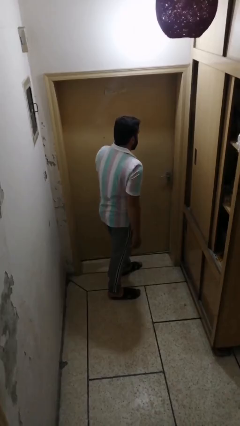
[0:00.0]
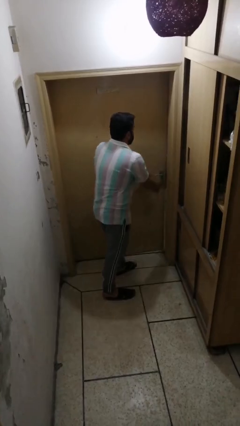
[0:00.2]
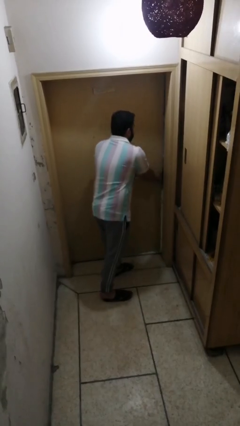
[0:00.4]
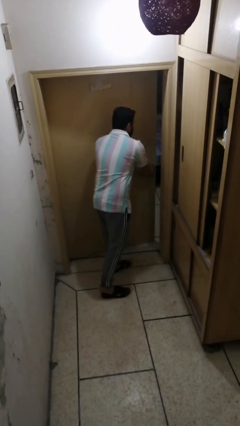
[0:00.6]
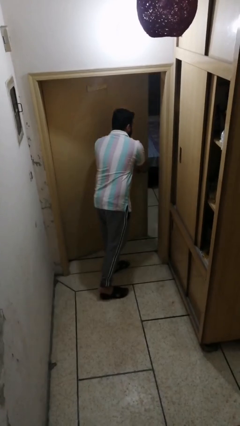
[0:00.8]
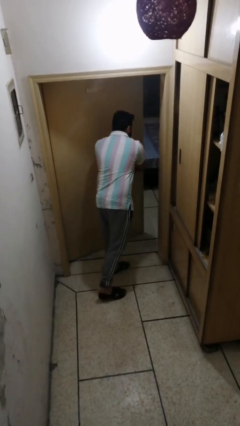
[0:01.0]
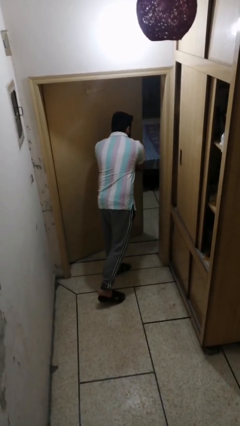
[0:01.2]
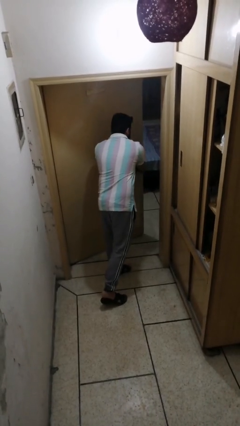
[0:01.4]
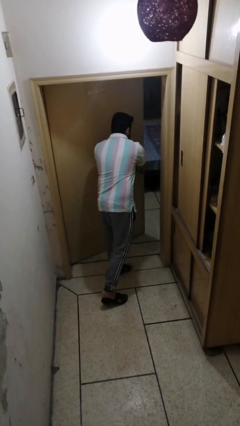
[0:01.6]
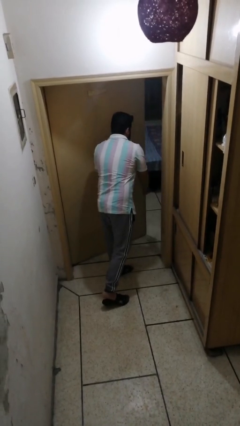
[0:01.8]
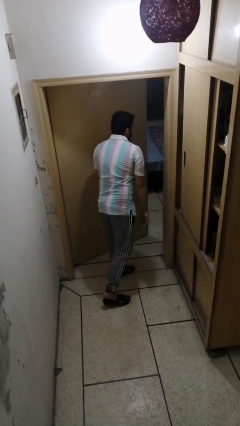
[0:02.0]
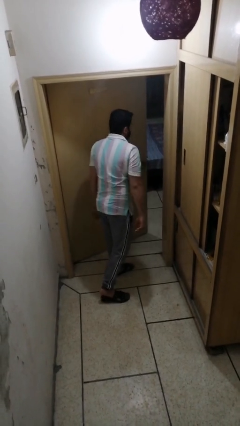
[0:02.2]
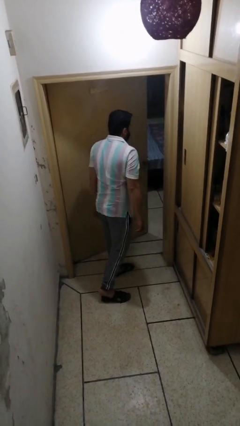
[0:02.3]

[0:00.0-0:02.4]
person opens facility door

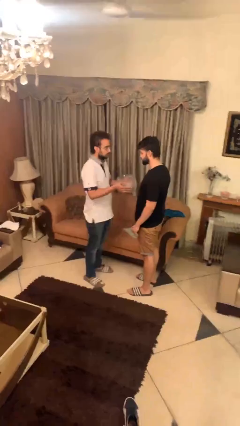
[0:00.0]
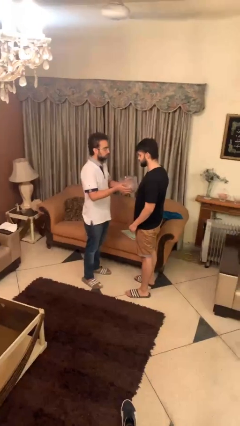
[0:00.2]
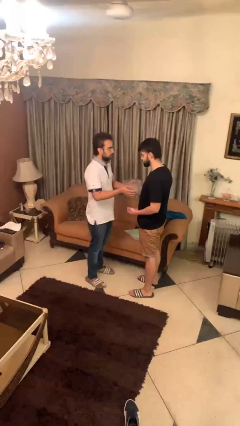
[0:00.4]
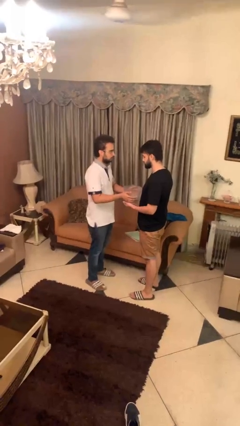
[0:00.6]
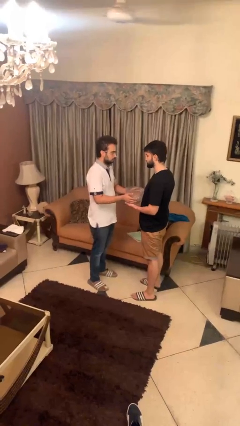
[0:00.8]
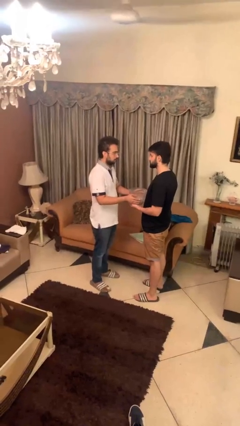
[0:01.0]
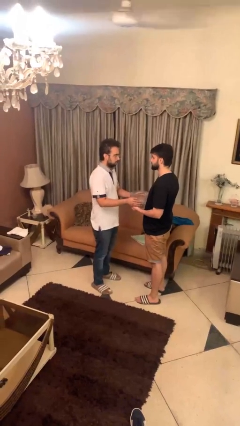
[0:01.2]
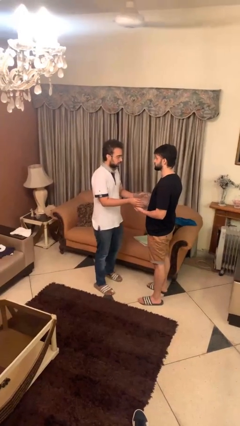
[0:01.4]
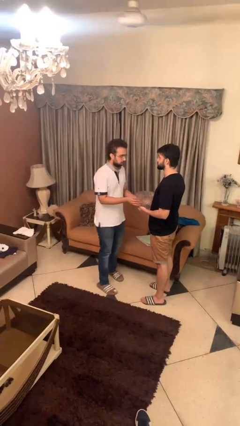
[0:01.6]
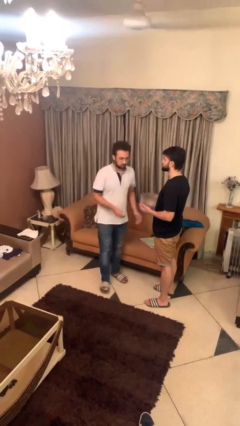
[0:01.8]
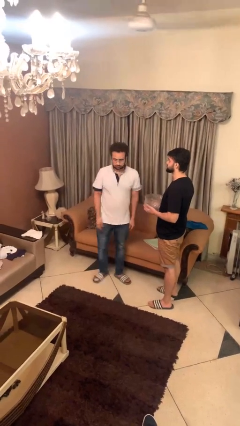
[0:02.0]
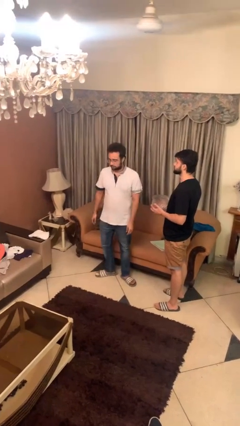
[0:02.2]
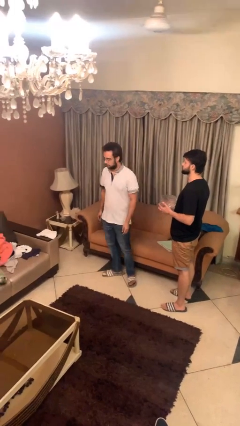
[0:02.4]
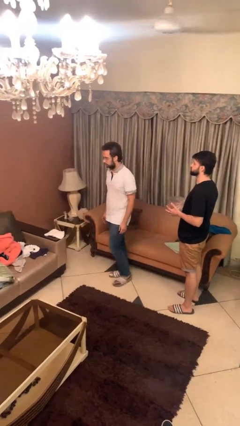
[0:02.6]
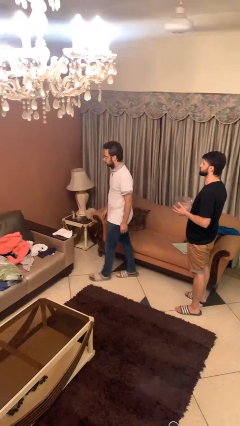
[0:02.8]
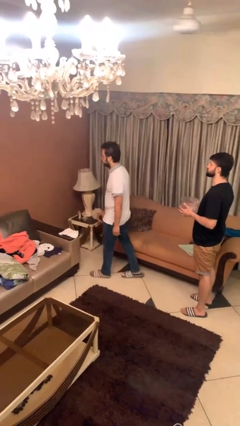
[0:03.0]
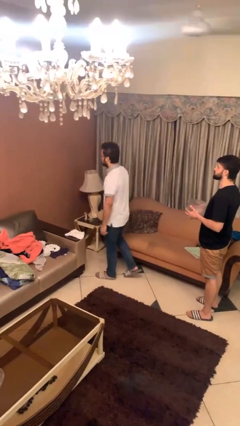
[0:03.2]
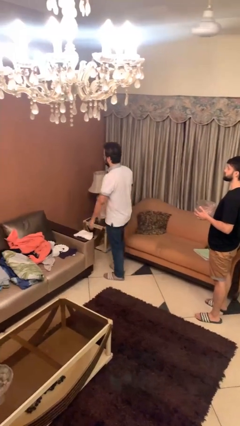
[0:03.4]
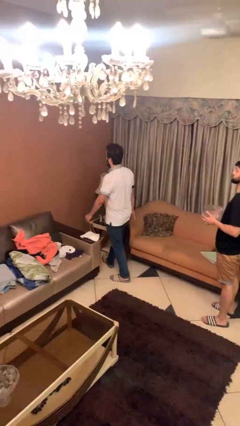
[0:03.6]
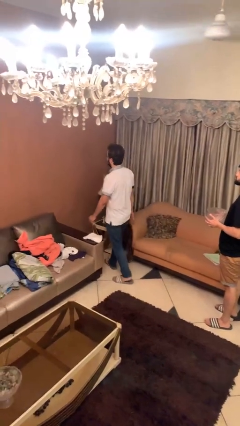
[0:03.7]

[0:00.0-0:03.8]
person transfers object to person

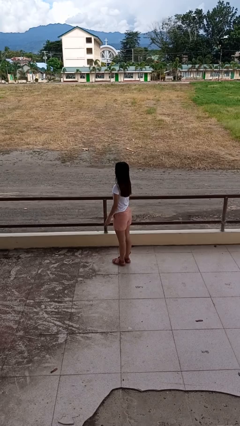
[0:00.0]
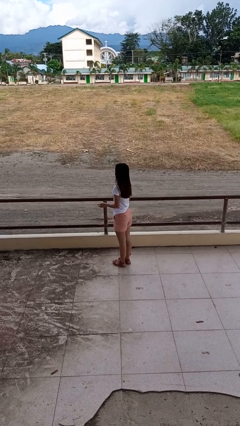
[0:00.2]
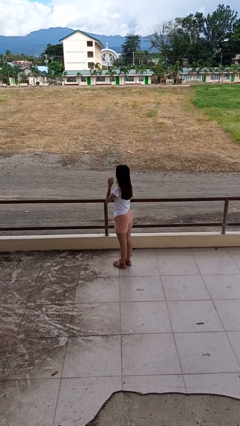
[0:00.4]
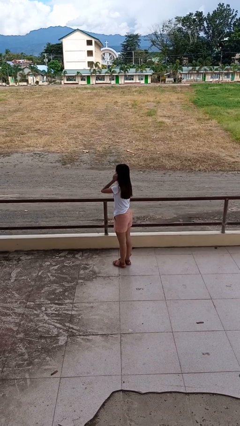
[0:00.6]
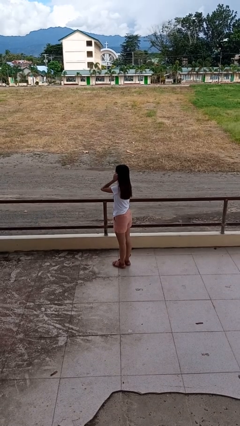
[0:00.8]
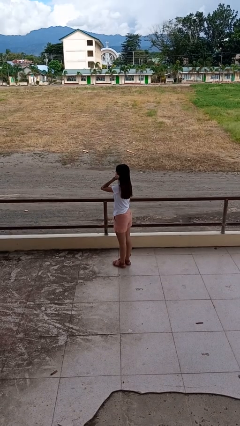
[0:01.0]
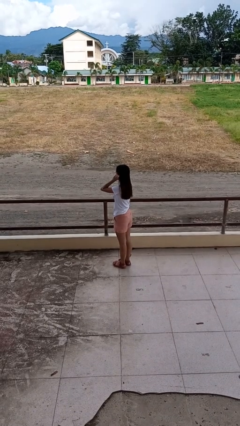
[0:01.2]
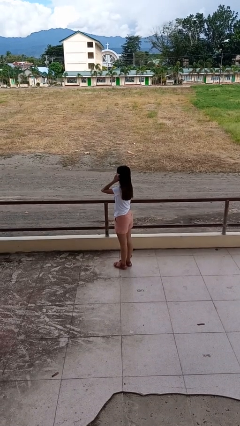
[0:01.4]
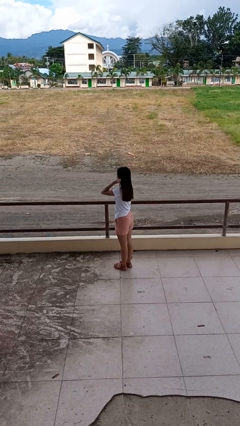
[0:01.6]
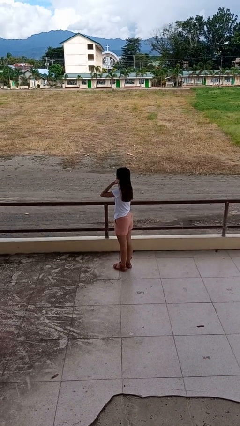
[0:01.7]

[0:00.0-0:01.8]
person touches earlobe

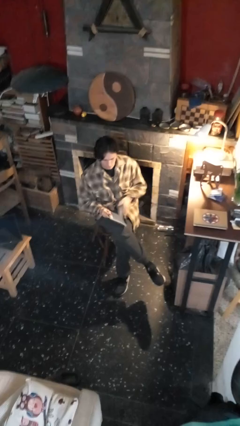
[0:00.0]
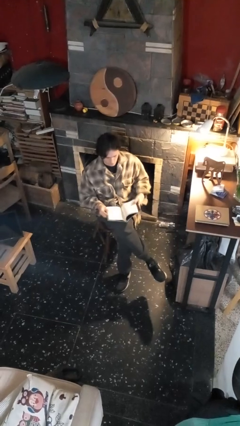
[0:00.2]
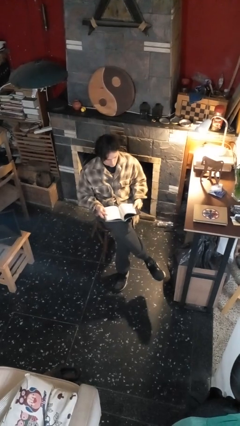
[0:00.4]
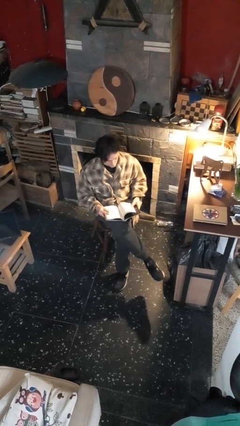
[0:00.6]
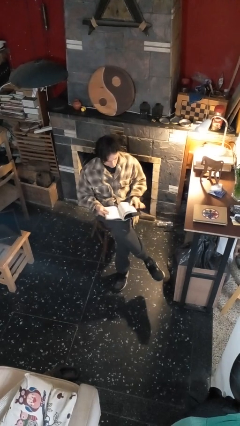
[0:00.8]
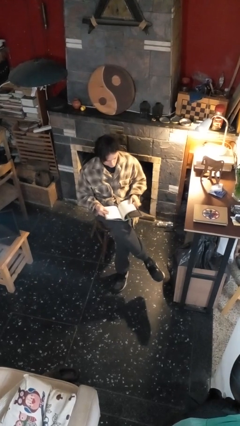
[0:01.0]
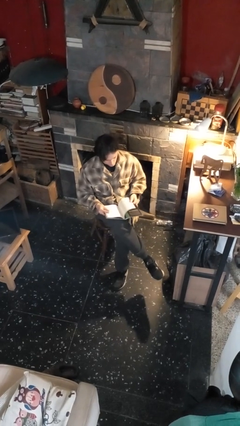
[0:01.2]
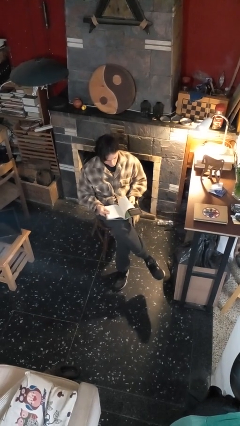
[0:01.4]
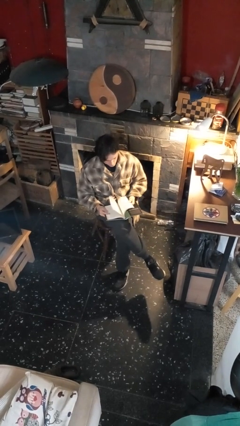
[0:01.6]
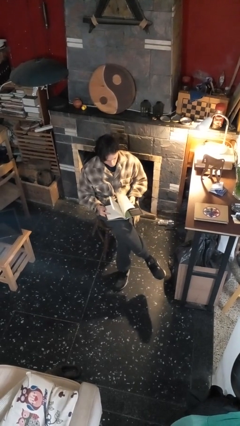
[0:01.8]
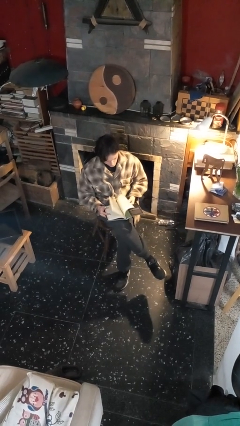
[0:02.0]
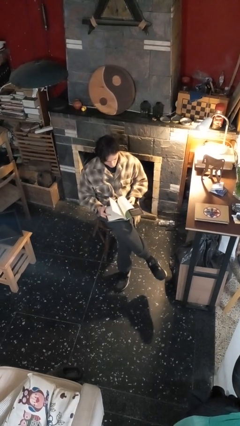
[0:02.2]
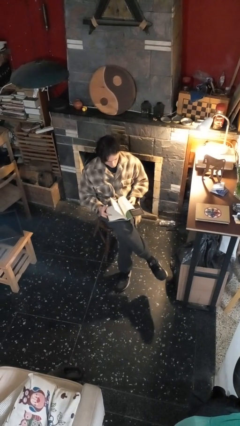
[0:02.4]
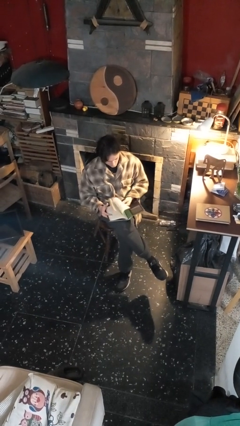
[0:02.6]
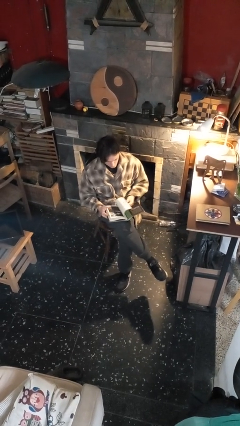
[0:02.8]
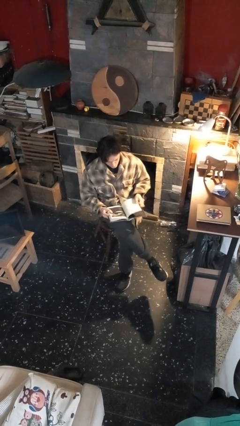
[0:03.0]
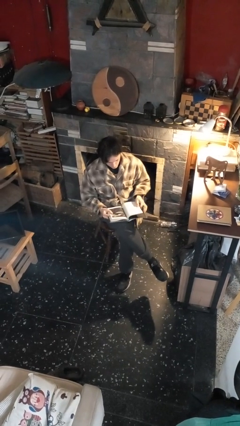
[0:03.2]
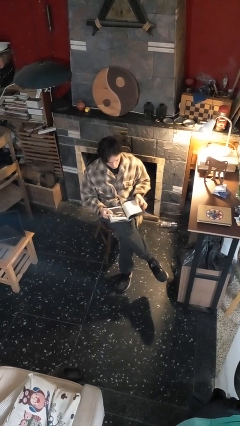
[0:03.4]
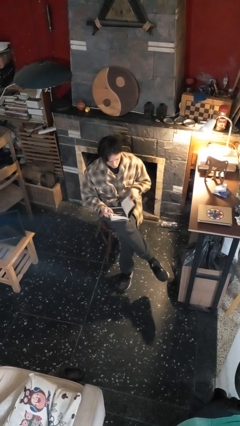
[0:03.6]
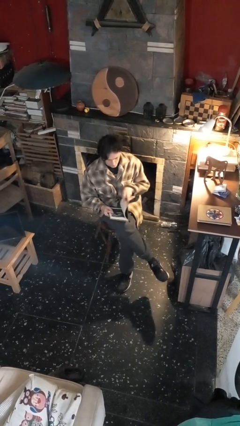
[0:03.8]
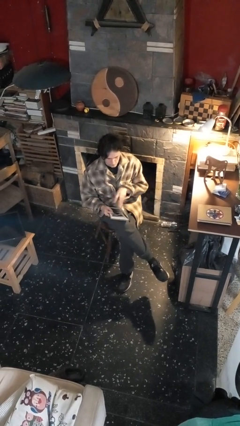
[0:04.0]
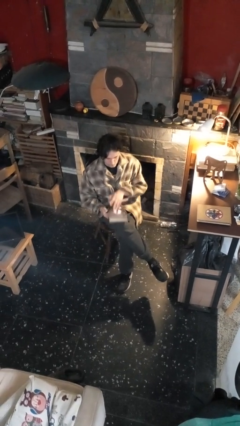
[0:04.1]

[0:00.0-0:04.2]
person reads book

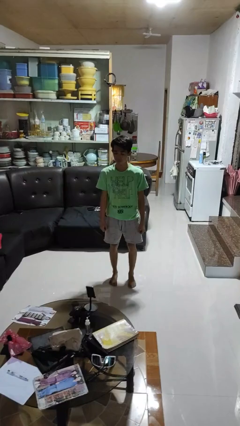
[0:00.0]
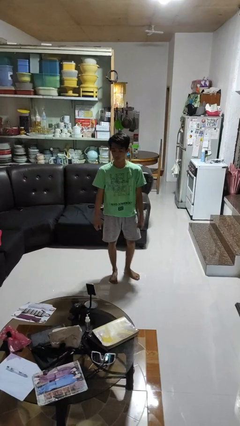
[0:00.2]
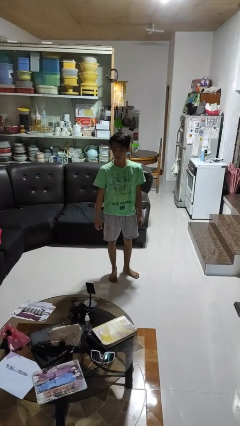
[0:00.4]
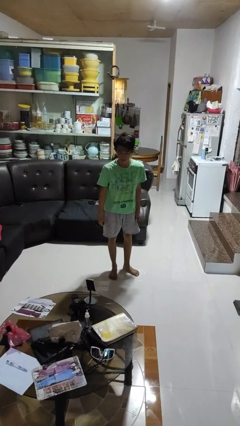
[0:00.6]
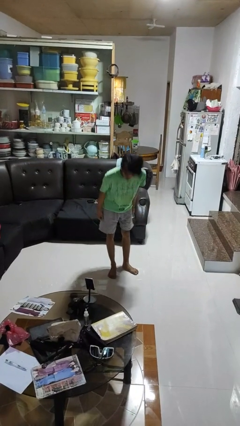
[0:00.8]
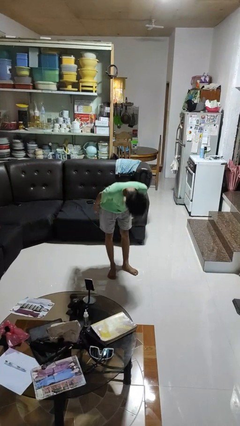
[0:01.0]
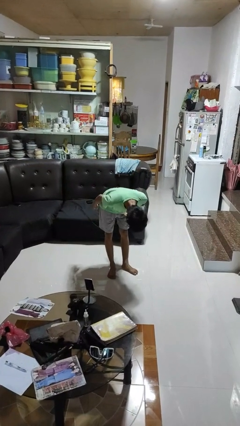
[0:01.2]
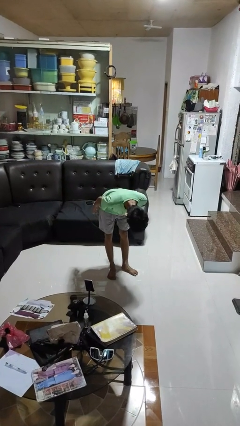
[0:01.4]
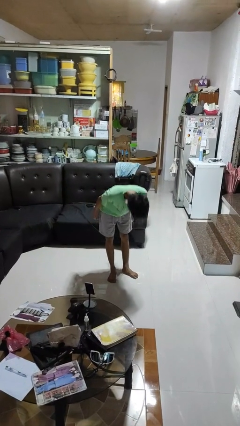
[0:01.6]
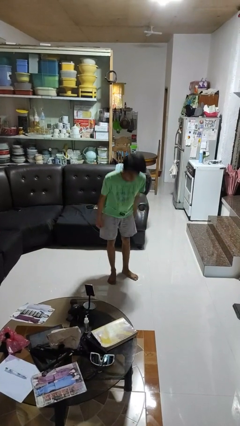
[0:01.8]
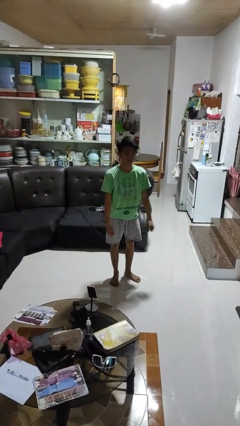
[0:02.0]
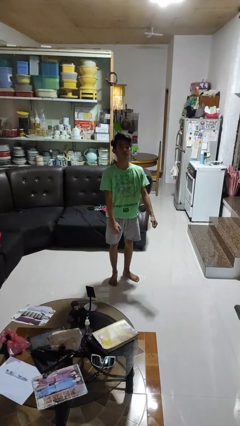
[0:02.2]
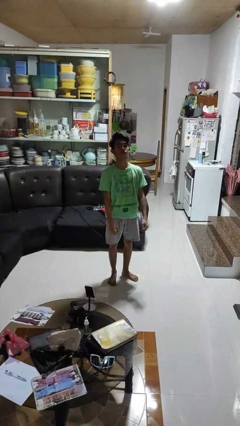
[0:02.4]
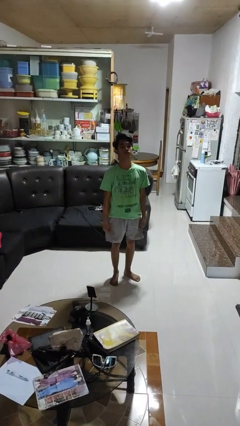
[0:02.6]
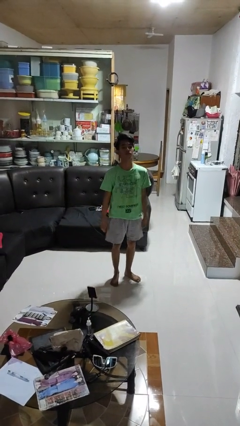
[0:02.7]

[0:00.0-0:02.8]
person bows

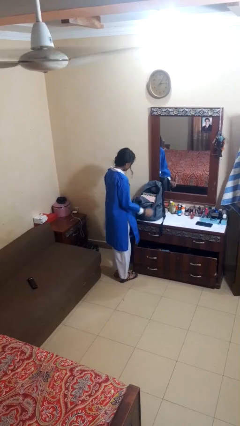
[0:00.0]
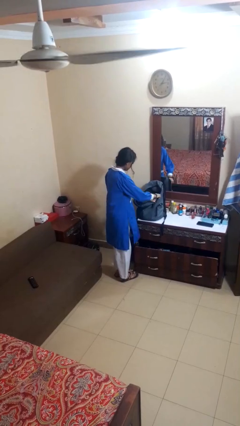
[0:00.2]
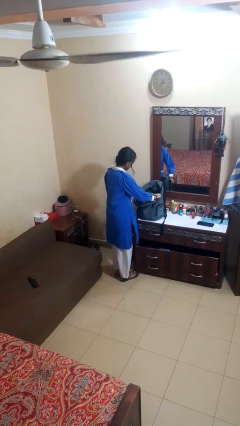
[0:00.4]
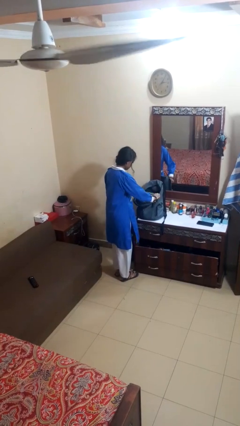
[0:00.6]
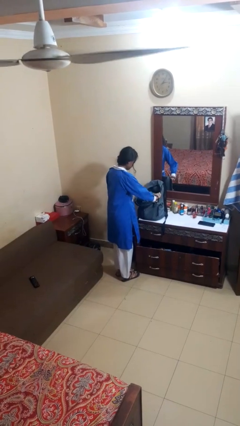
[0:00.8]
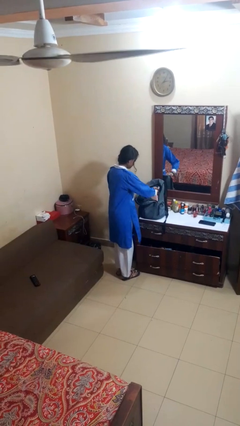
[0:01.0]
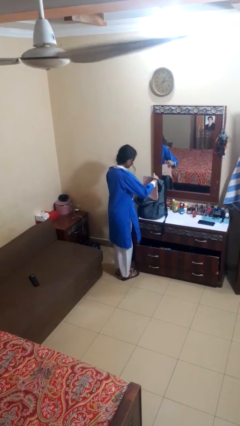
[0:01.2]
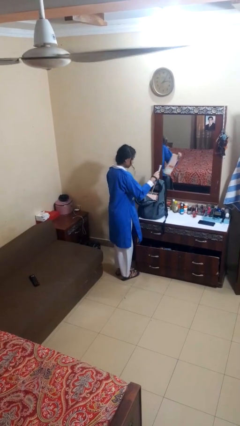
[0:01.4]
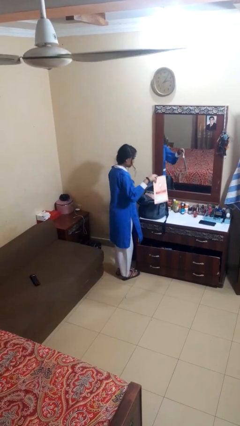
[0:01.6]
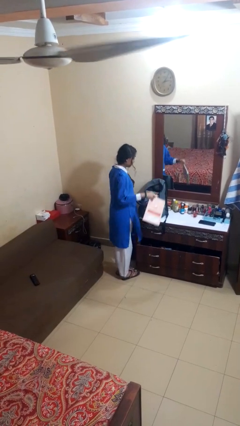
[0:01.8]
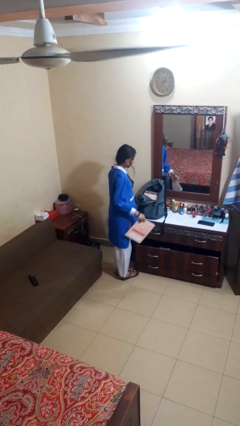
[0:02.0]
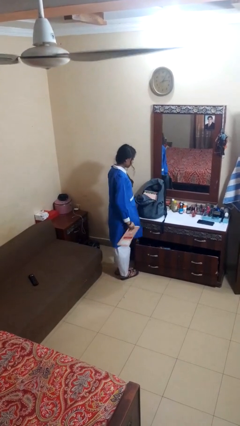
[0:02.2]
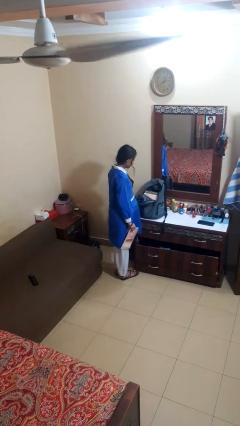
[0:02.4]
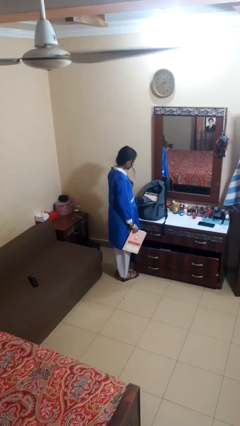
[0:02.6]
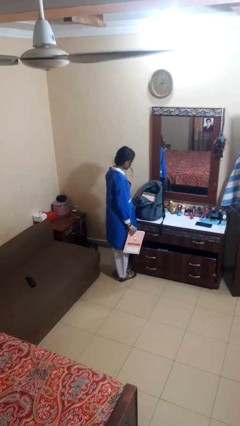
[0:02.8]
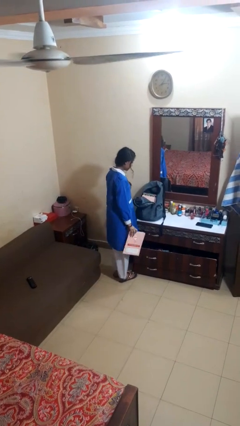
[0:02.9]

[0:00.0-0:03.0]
person takes object from bag
